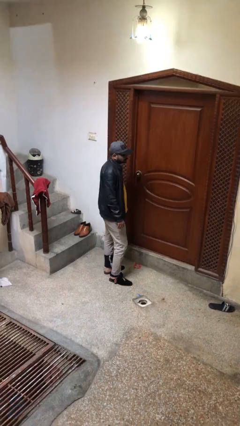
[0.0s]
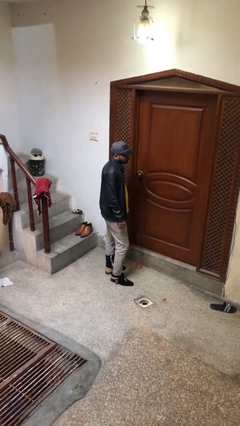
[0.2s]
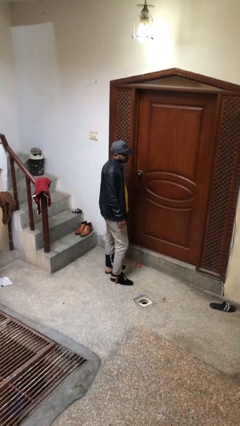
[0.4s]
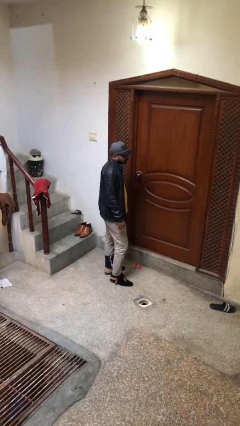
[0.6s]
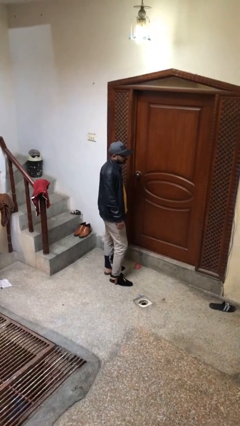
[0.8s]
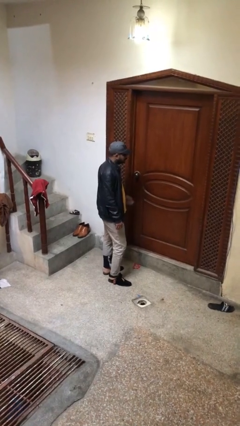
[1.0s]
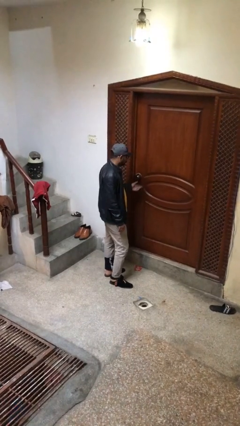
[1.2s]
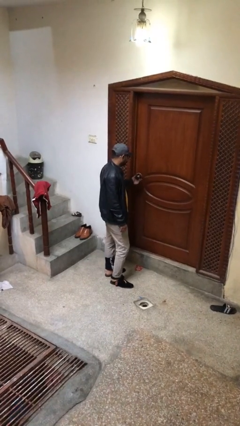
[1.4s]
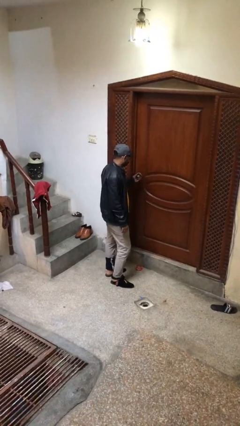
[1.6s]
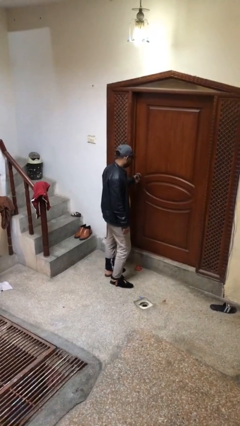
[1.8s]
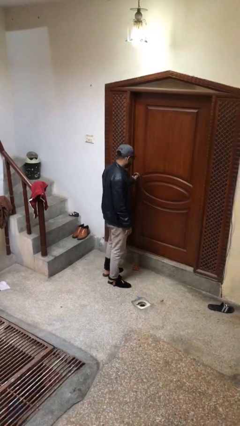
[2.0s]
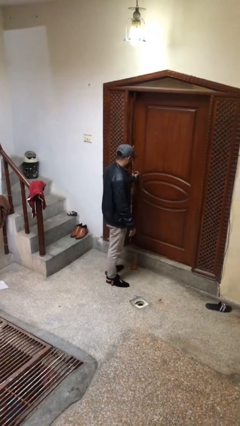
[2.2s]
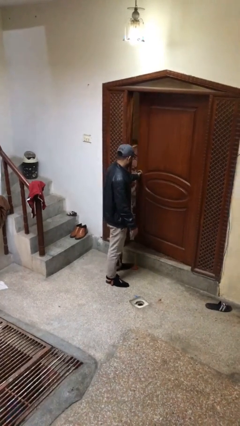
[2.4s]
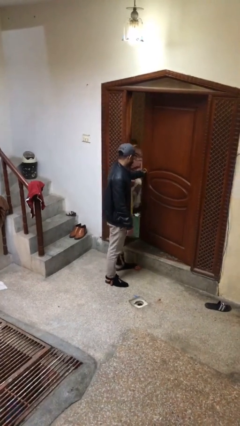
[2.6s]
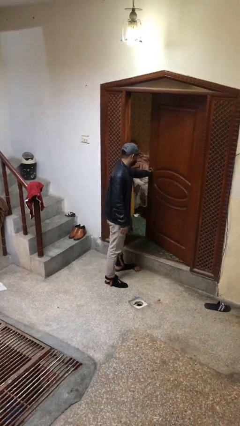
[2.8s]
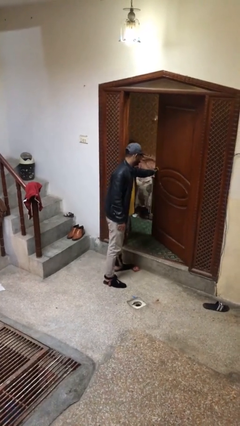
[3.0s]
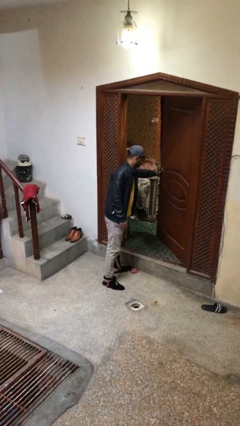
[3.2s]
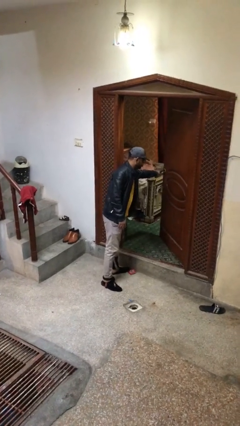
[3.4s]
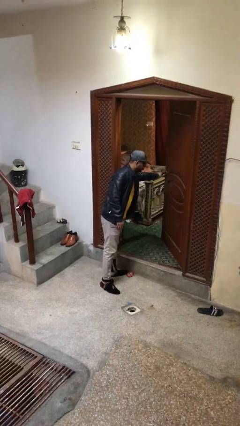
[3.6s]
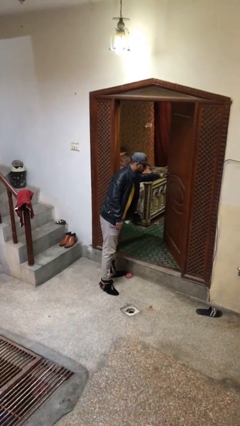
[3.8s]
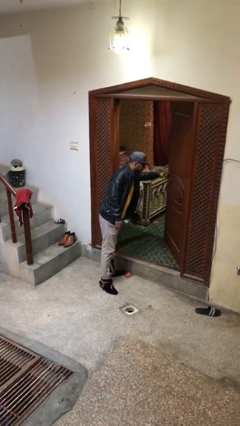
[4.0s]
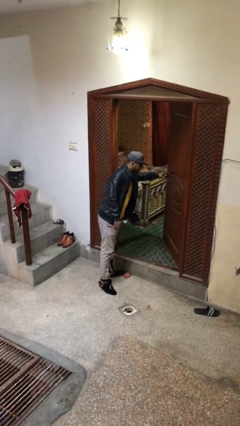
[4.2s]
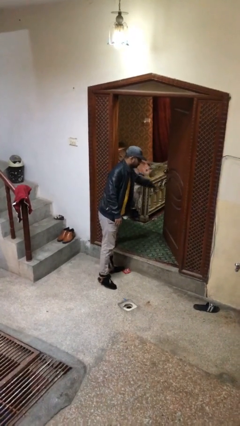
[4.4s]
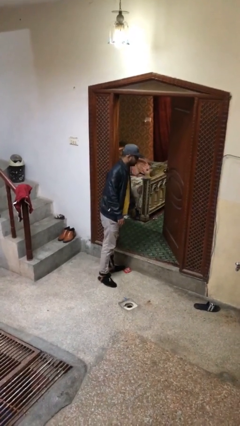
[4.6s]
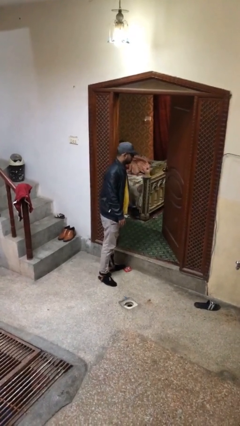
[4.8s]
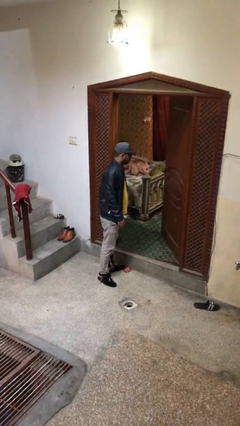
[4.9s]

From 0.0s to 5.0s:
person opens facility door

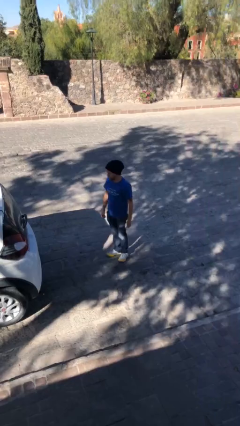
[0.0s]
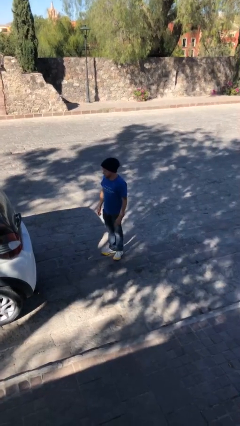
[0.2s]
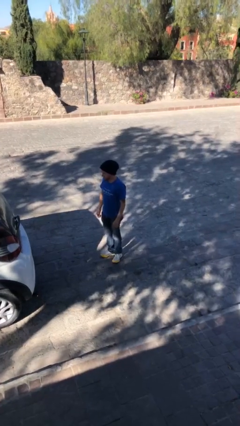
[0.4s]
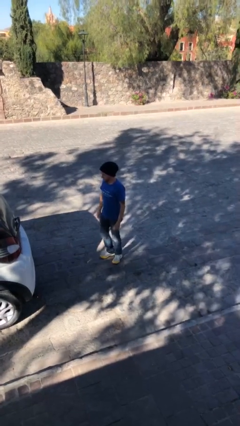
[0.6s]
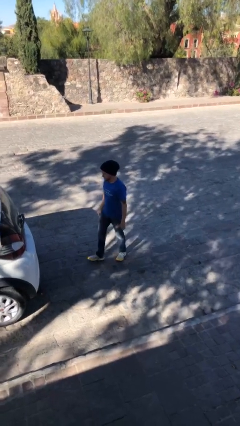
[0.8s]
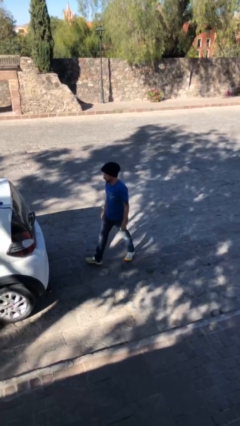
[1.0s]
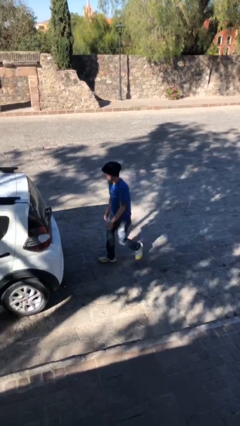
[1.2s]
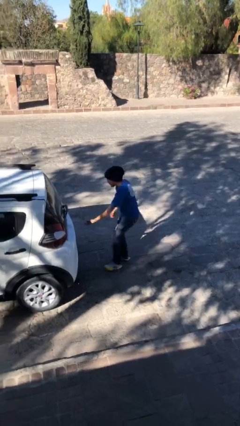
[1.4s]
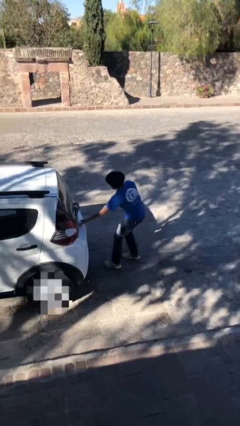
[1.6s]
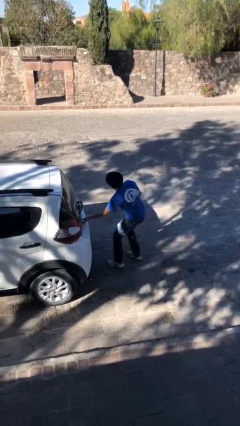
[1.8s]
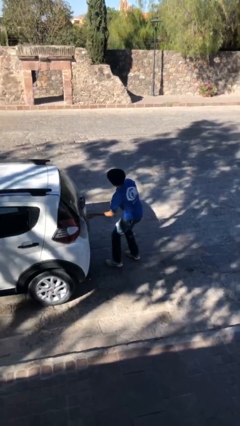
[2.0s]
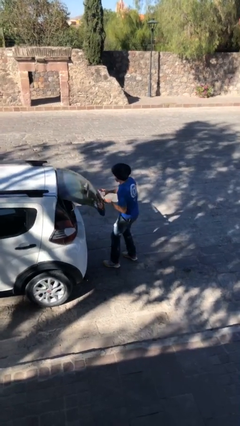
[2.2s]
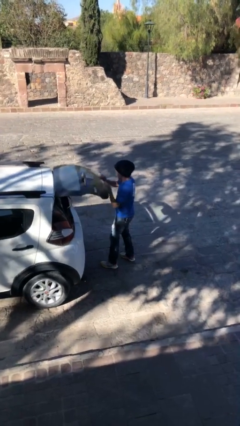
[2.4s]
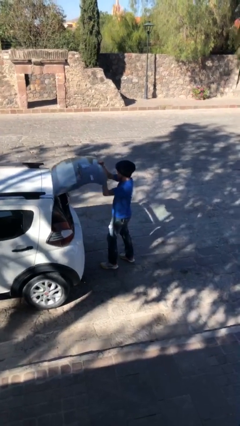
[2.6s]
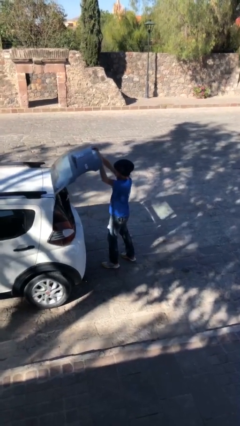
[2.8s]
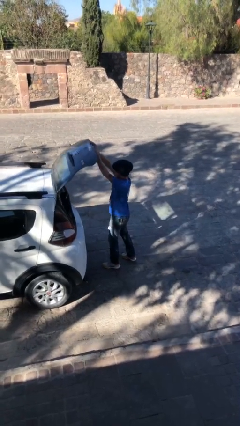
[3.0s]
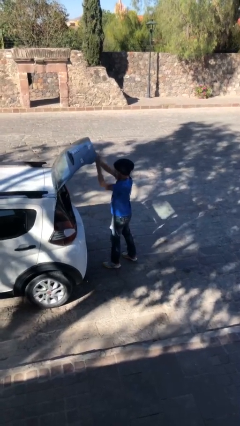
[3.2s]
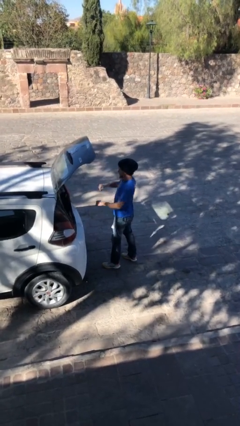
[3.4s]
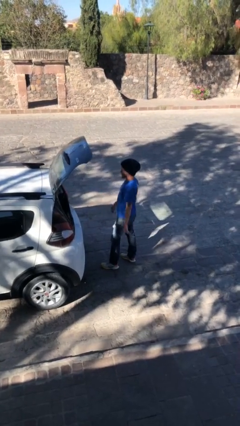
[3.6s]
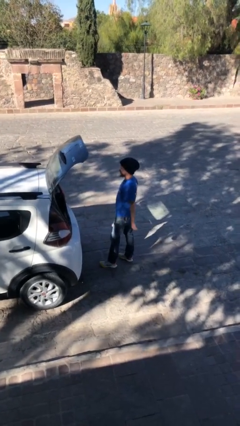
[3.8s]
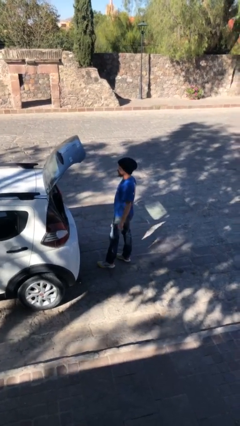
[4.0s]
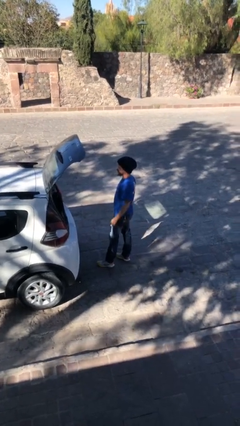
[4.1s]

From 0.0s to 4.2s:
person opens car trunk

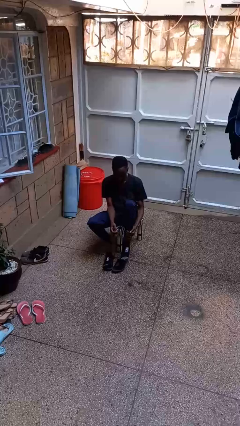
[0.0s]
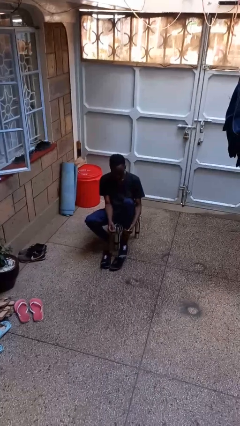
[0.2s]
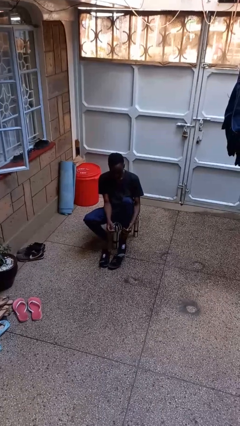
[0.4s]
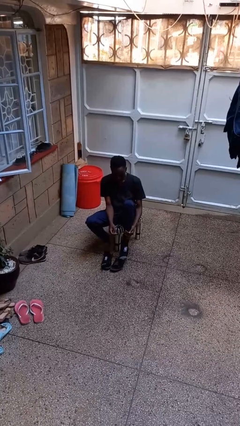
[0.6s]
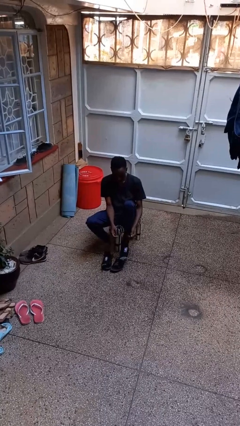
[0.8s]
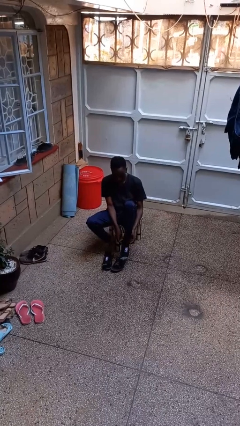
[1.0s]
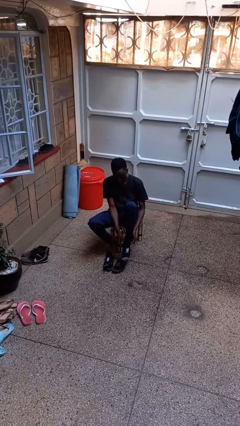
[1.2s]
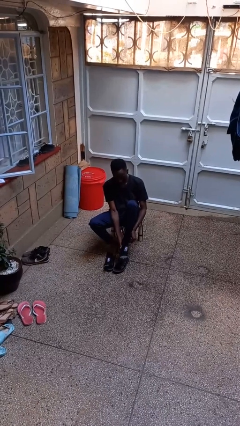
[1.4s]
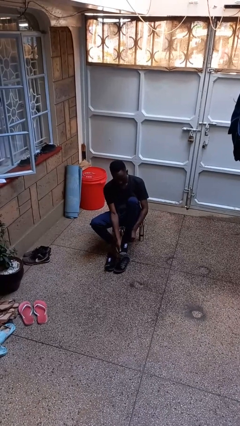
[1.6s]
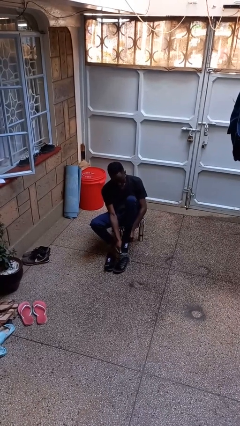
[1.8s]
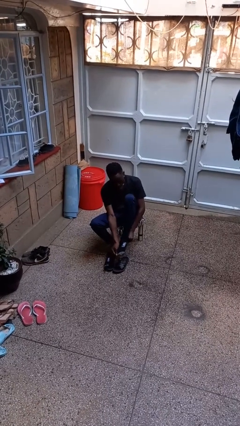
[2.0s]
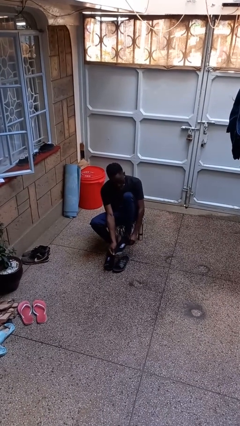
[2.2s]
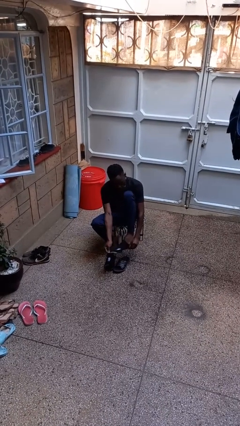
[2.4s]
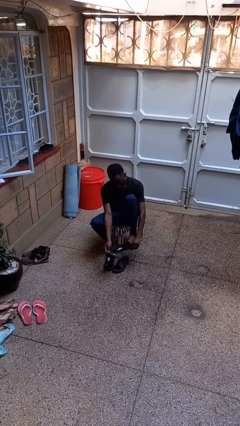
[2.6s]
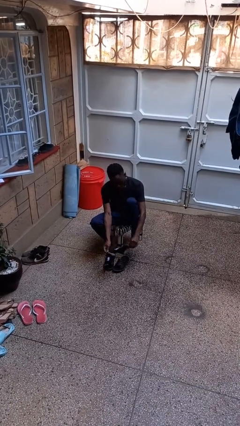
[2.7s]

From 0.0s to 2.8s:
person takes off socks

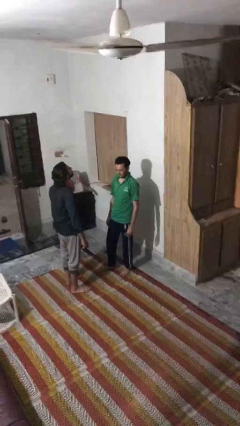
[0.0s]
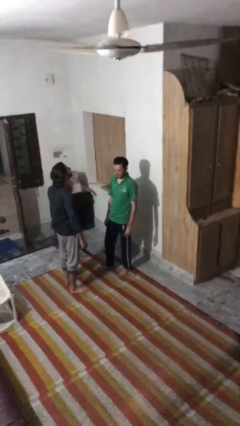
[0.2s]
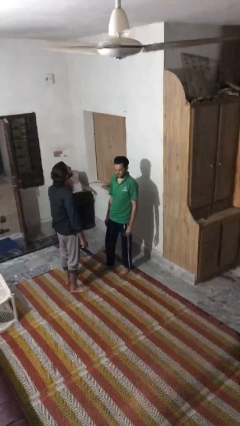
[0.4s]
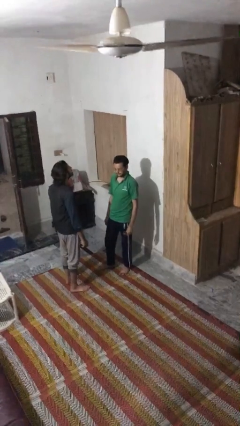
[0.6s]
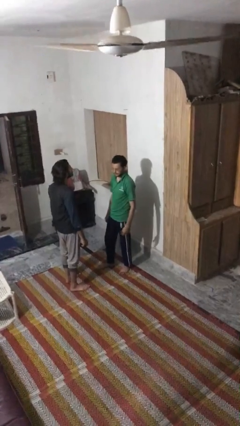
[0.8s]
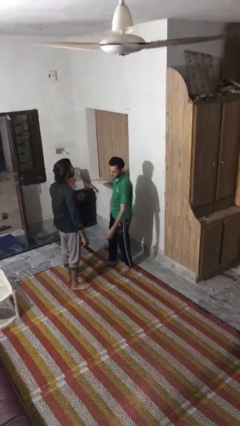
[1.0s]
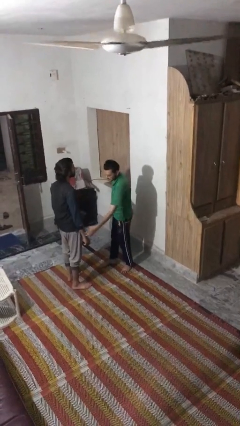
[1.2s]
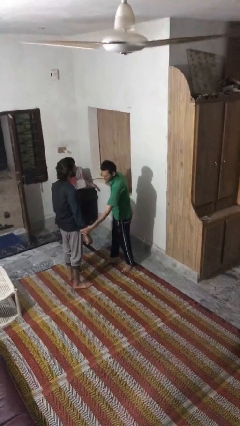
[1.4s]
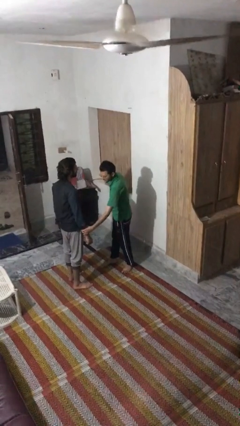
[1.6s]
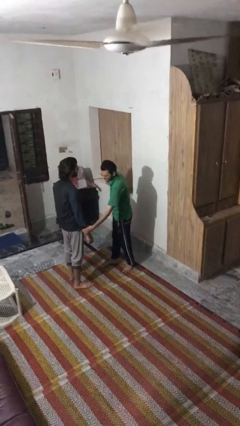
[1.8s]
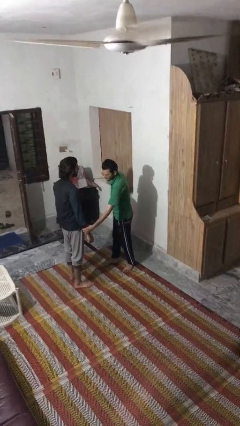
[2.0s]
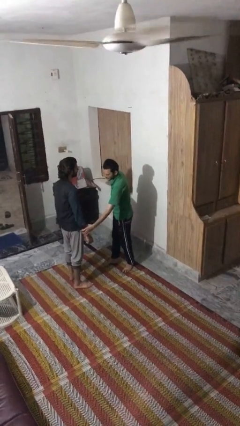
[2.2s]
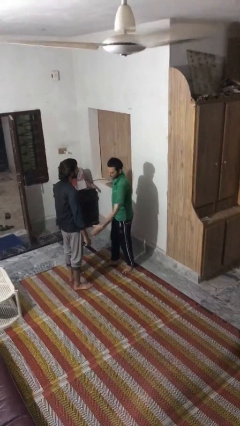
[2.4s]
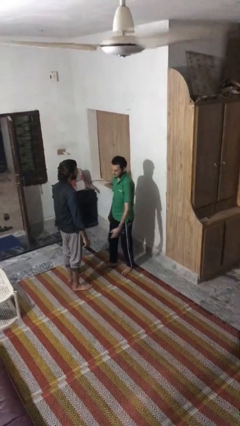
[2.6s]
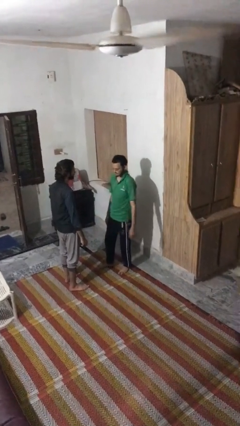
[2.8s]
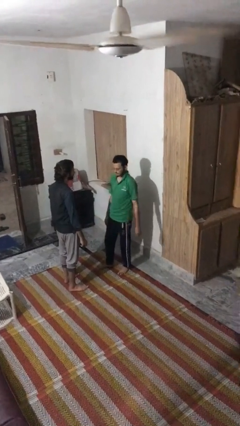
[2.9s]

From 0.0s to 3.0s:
person grabs person by forearm

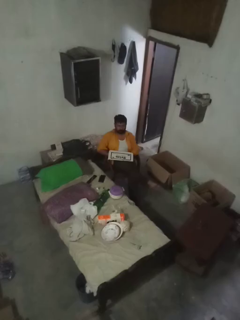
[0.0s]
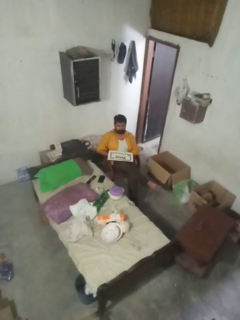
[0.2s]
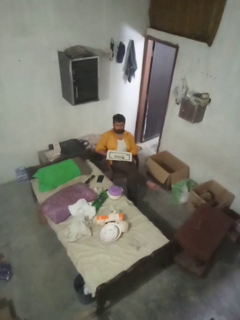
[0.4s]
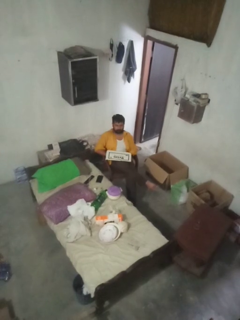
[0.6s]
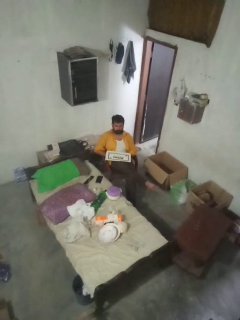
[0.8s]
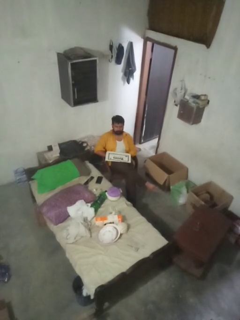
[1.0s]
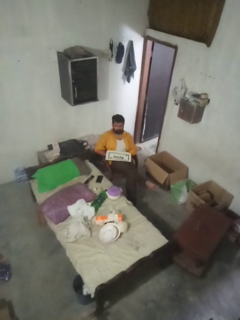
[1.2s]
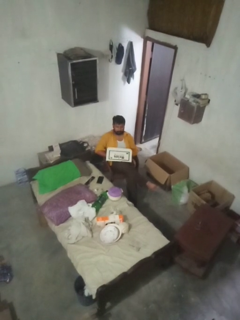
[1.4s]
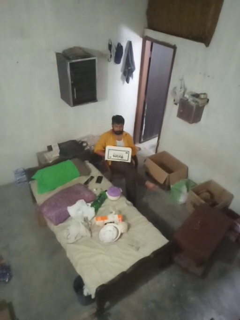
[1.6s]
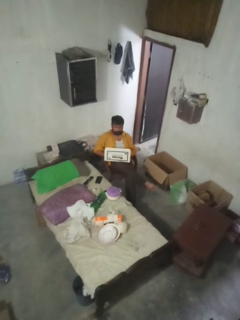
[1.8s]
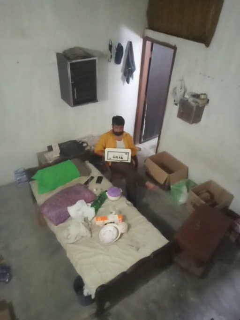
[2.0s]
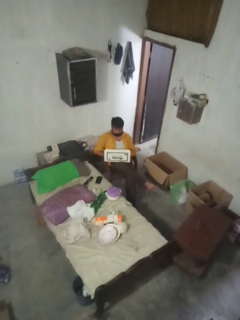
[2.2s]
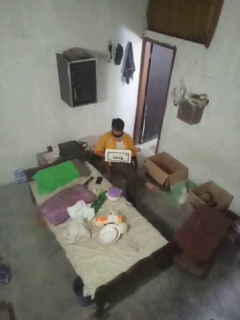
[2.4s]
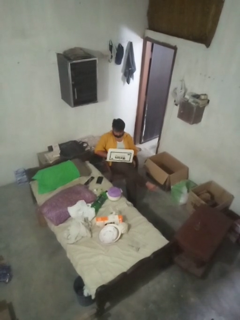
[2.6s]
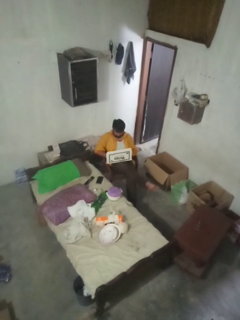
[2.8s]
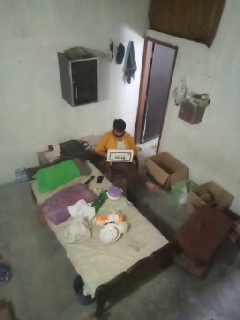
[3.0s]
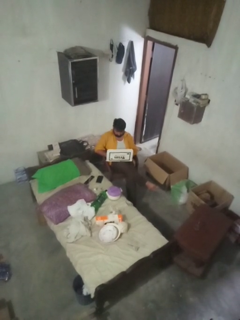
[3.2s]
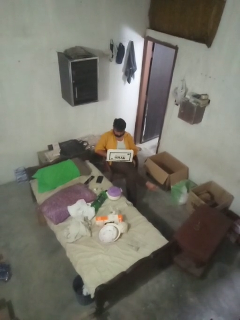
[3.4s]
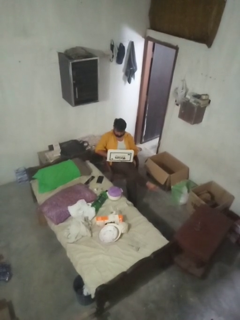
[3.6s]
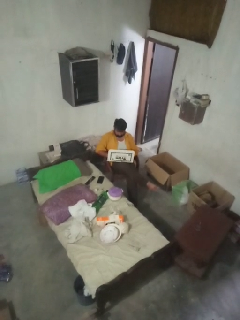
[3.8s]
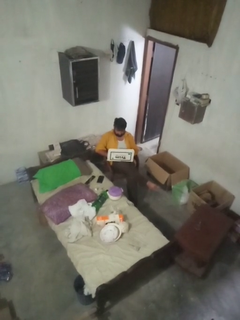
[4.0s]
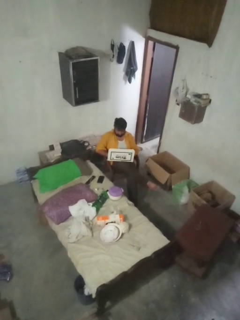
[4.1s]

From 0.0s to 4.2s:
person opens laptop
